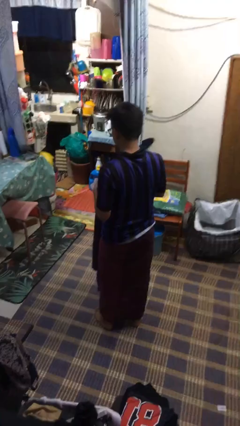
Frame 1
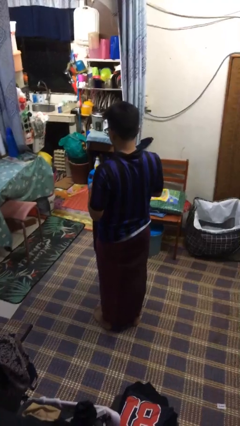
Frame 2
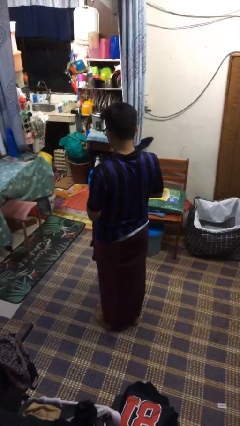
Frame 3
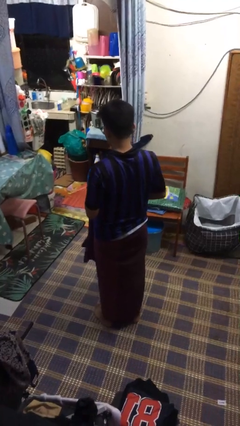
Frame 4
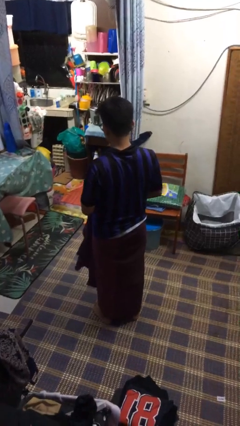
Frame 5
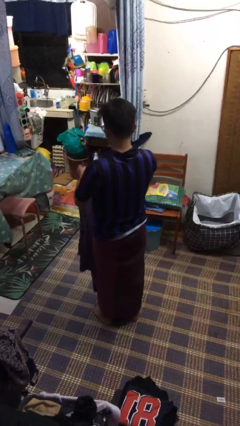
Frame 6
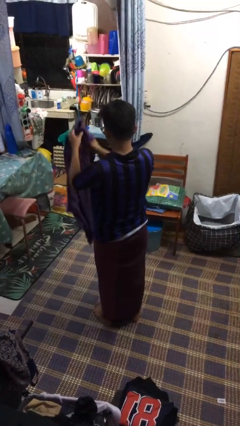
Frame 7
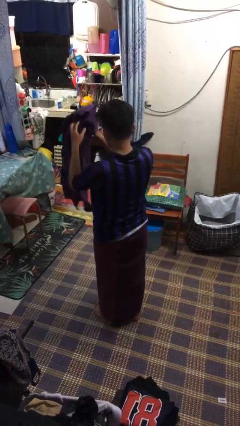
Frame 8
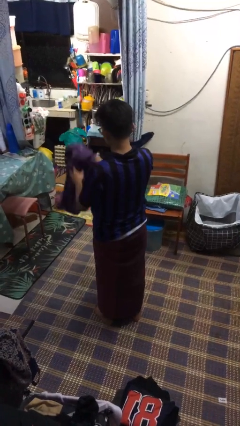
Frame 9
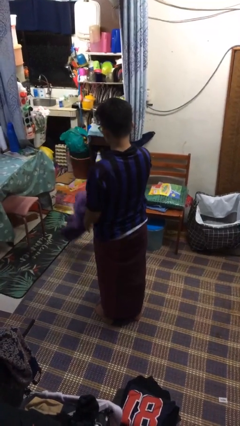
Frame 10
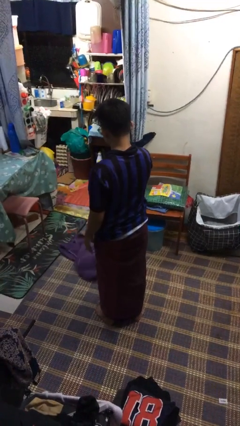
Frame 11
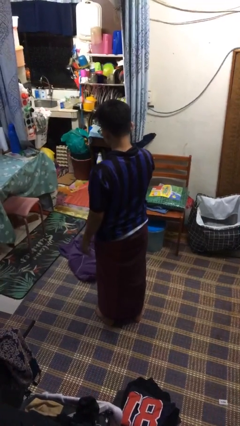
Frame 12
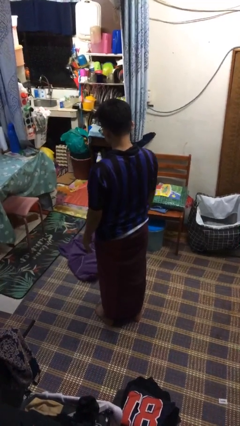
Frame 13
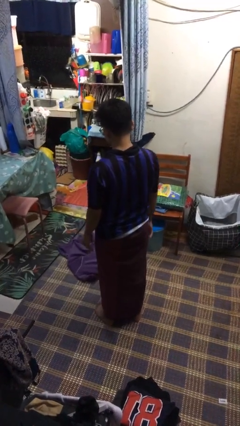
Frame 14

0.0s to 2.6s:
person throws object to ground

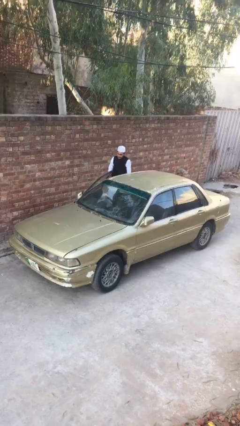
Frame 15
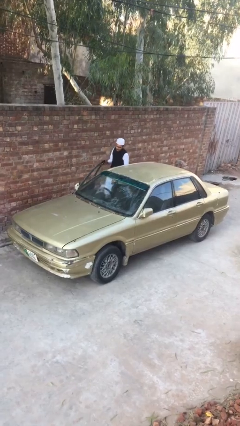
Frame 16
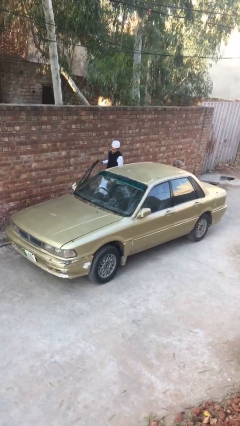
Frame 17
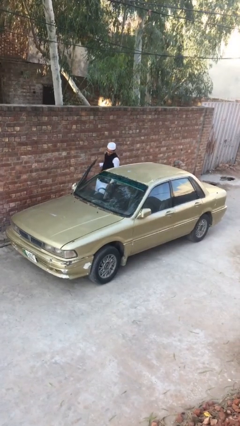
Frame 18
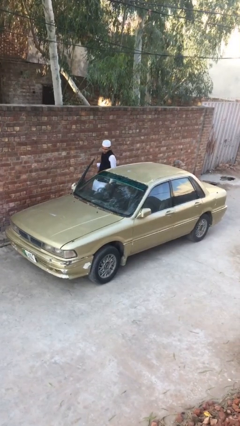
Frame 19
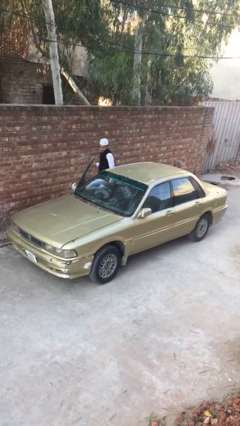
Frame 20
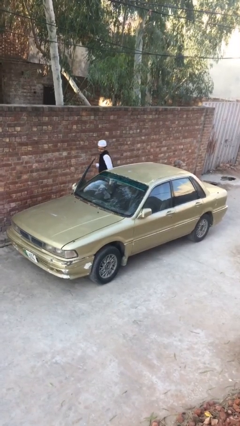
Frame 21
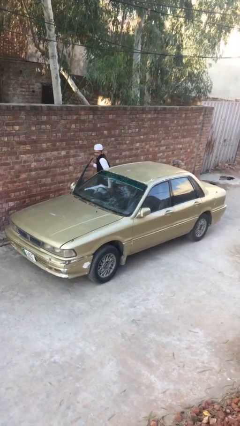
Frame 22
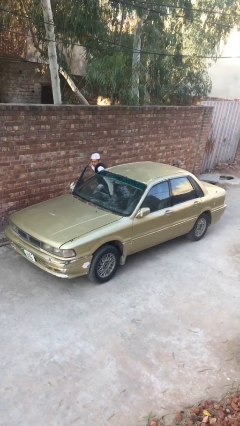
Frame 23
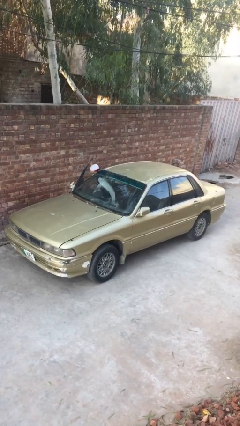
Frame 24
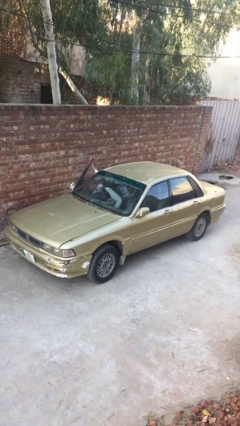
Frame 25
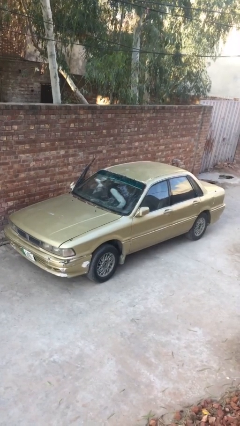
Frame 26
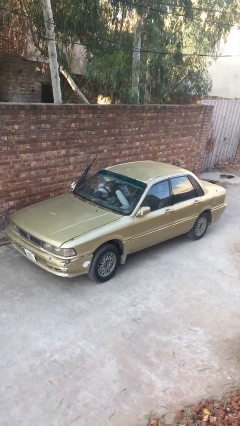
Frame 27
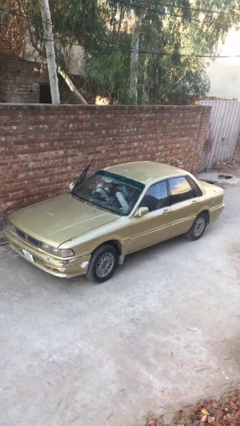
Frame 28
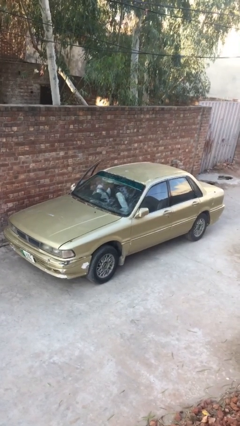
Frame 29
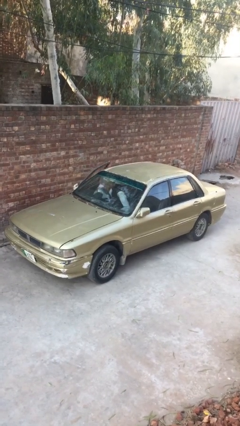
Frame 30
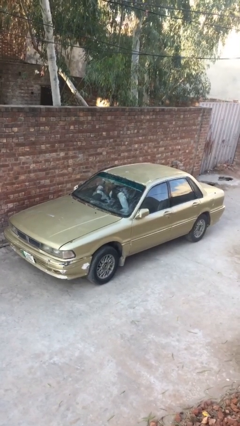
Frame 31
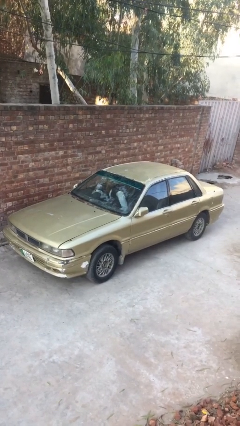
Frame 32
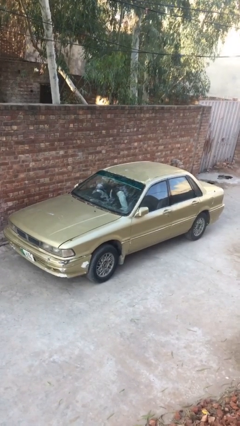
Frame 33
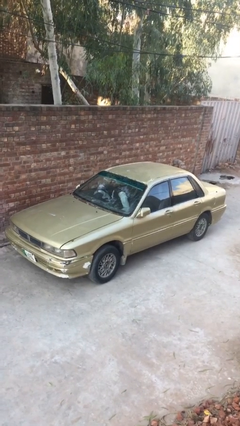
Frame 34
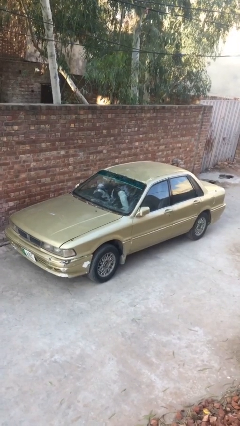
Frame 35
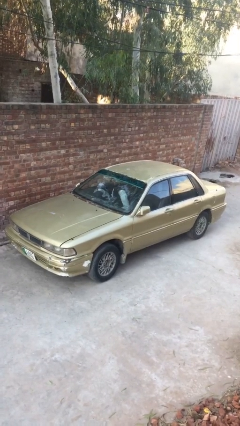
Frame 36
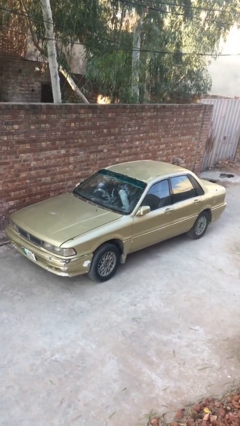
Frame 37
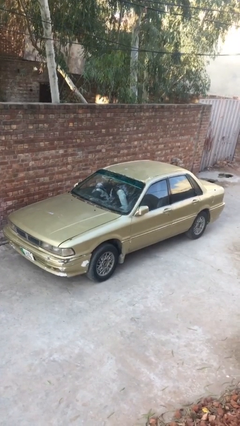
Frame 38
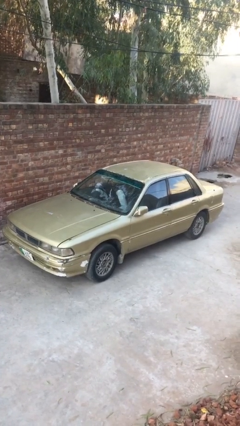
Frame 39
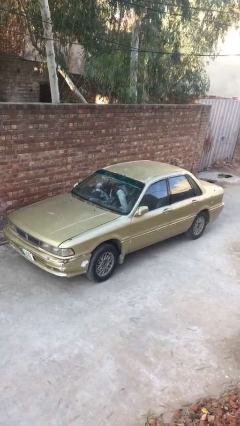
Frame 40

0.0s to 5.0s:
car picks up person

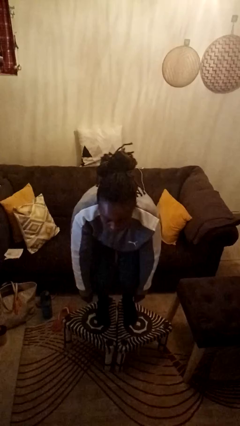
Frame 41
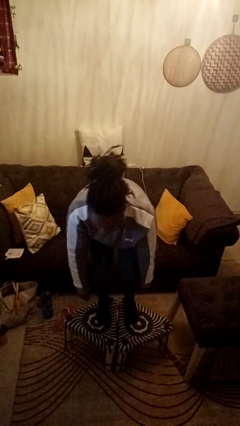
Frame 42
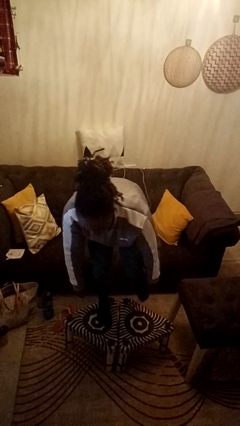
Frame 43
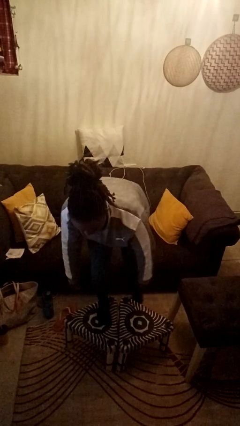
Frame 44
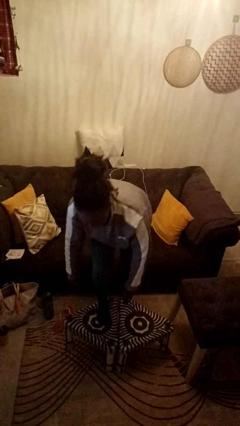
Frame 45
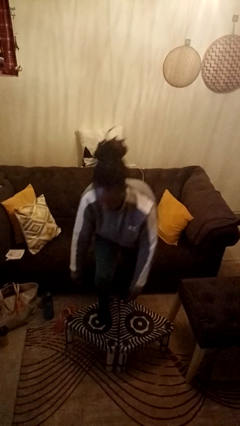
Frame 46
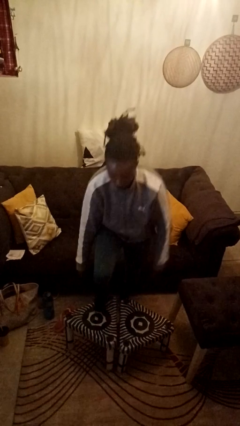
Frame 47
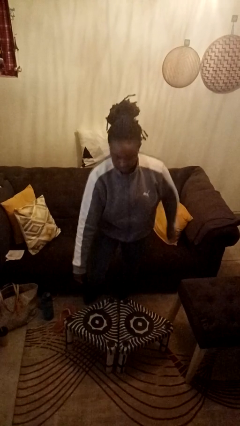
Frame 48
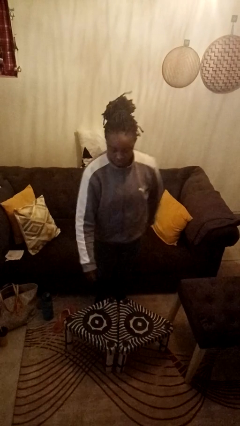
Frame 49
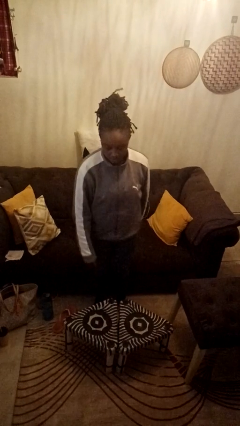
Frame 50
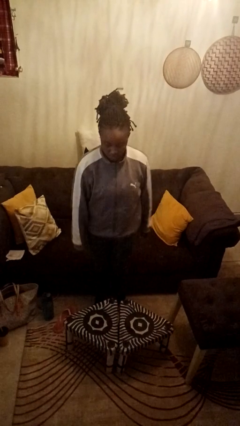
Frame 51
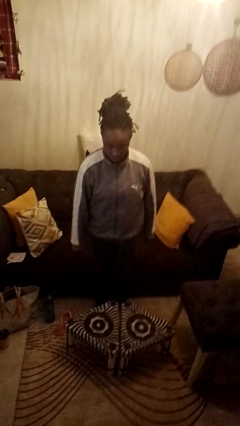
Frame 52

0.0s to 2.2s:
person climbs off table

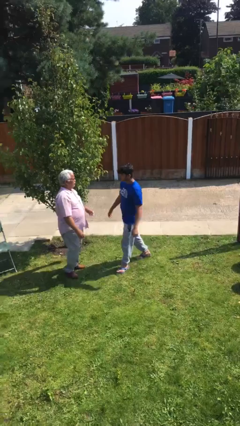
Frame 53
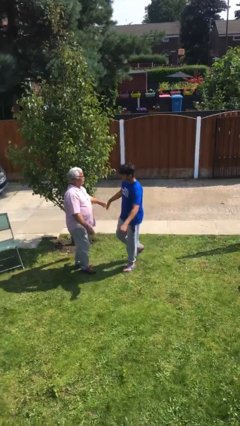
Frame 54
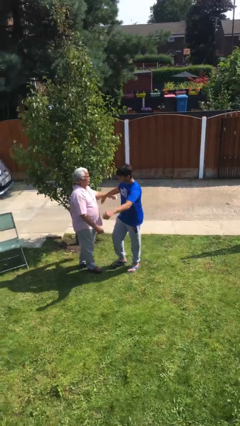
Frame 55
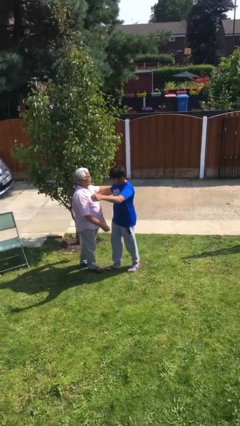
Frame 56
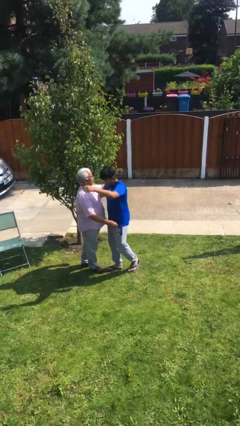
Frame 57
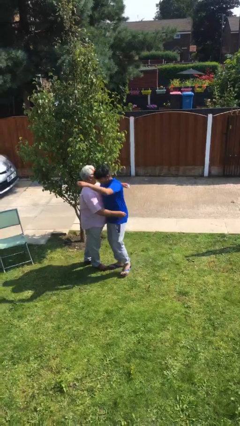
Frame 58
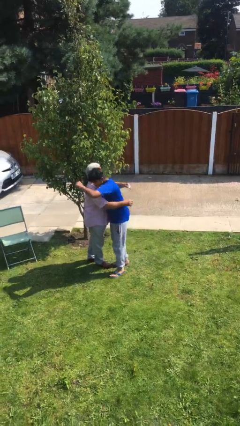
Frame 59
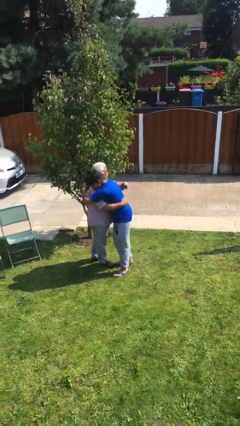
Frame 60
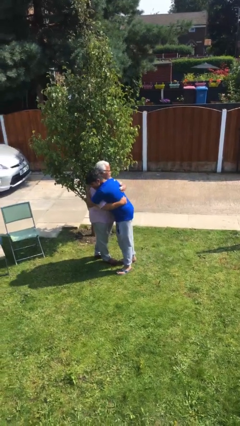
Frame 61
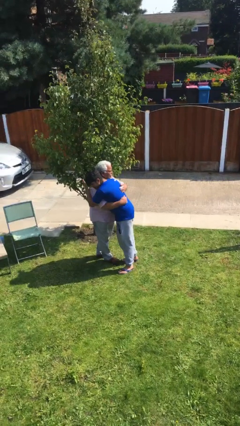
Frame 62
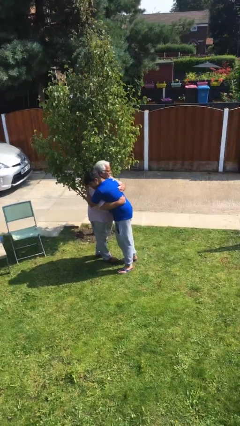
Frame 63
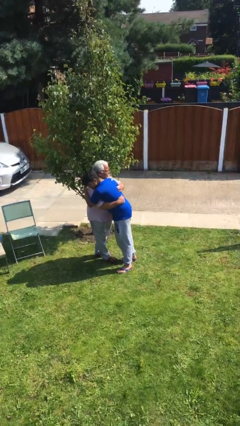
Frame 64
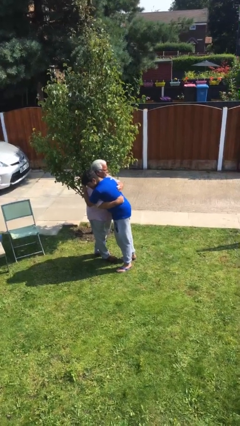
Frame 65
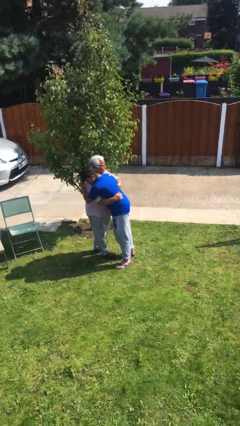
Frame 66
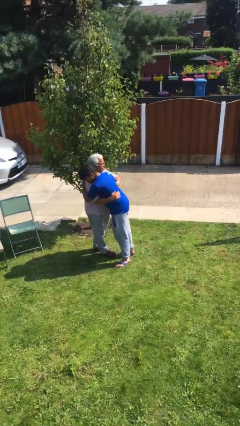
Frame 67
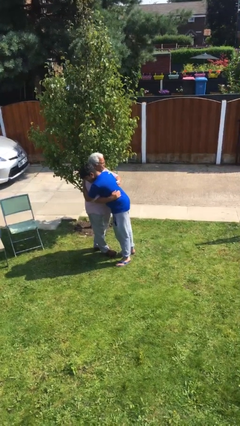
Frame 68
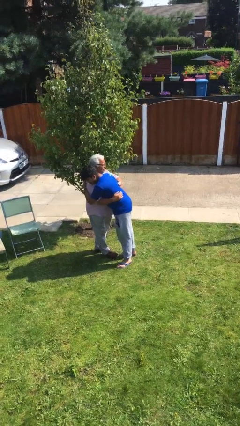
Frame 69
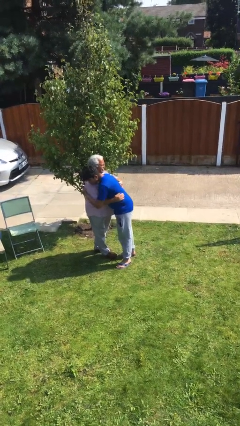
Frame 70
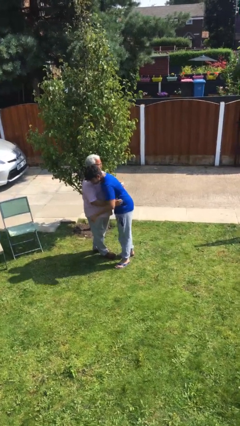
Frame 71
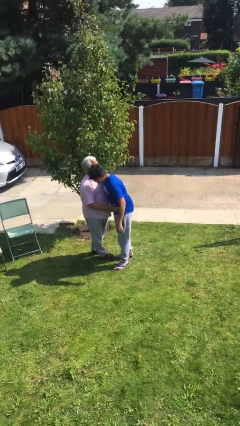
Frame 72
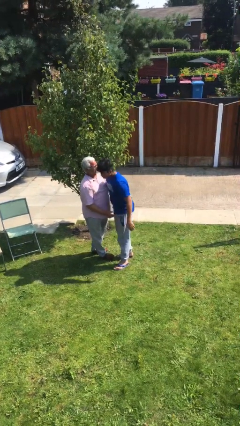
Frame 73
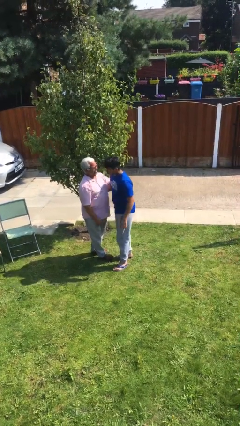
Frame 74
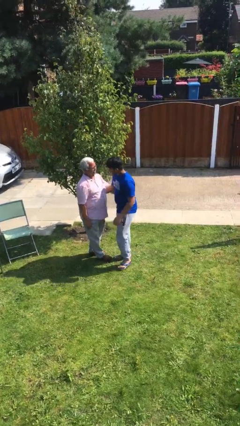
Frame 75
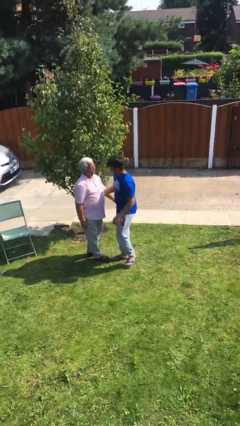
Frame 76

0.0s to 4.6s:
person embraces person

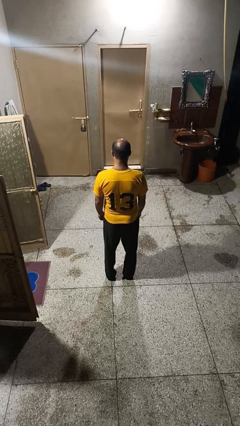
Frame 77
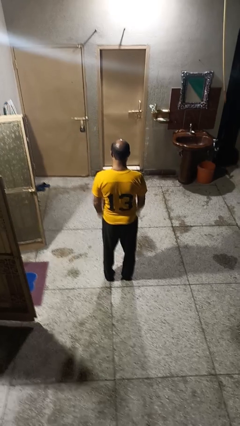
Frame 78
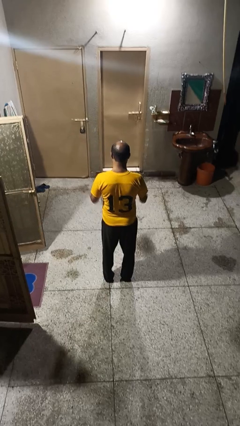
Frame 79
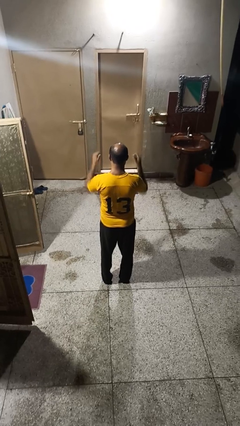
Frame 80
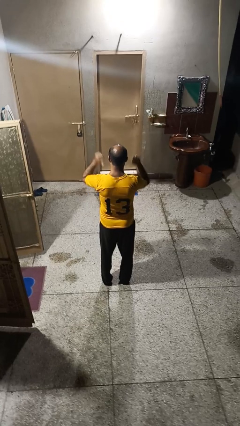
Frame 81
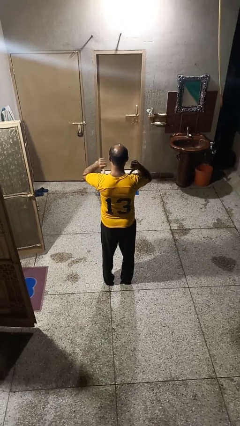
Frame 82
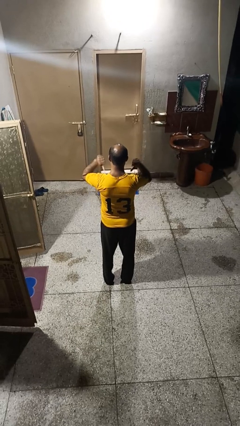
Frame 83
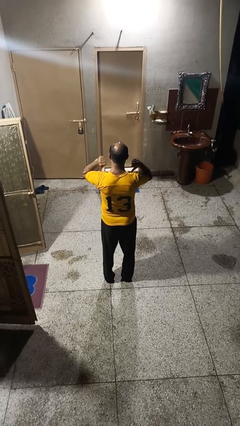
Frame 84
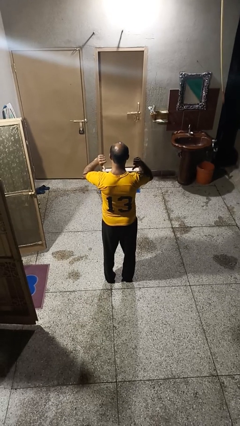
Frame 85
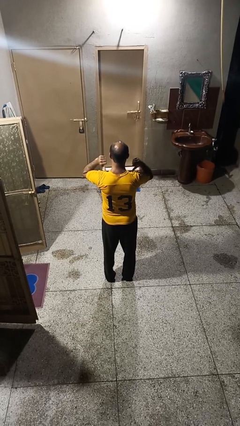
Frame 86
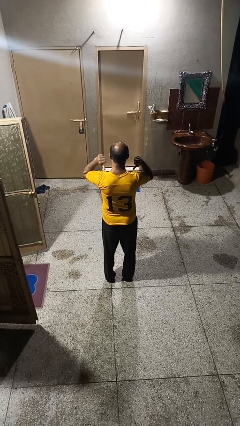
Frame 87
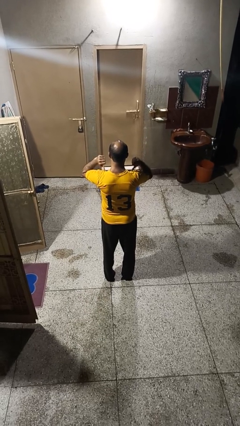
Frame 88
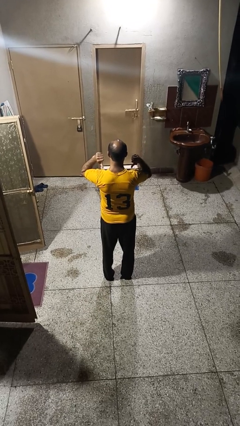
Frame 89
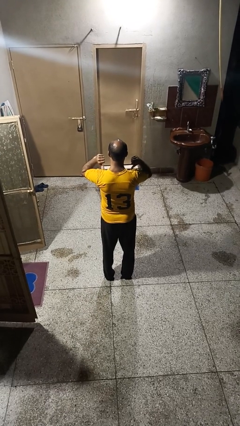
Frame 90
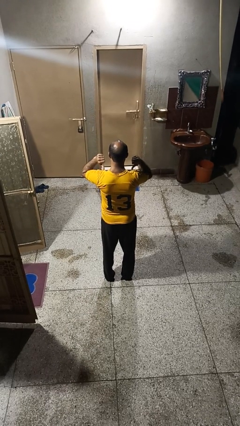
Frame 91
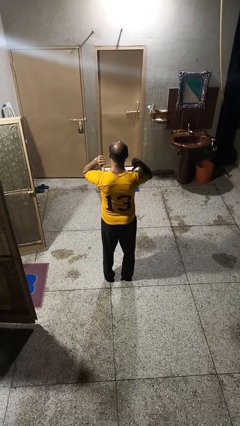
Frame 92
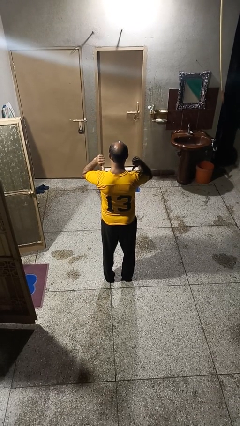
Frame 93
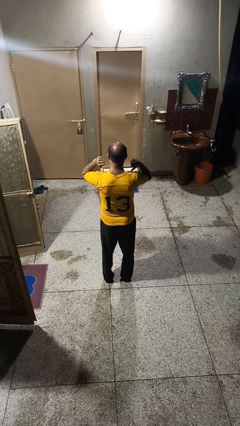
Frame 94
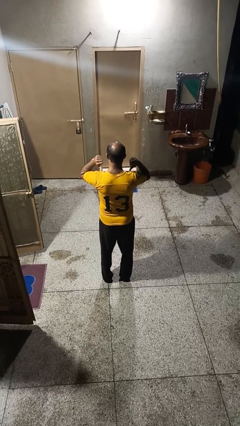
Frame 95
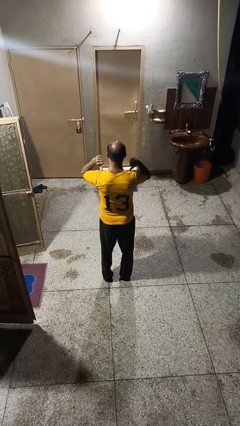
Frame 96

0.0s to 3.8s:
person gestures behind me
